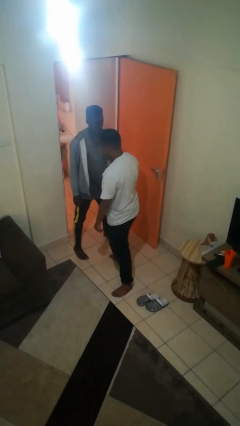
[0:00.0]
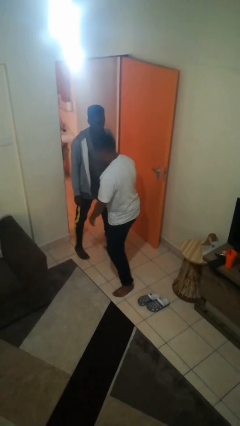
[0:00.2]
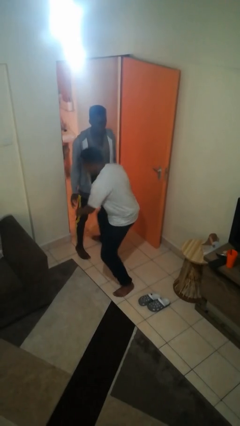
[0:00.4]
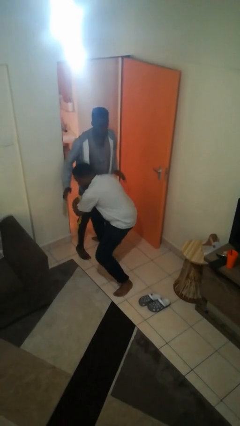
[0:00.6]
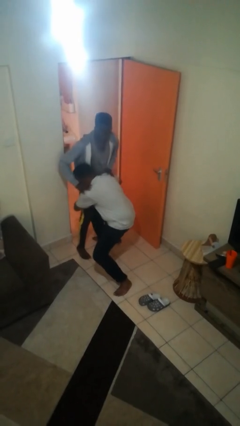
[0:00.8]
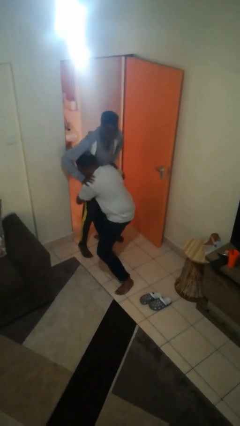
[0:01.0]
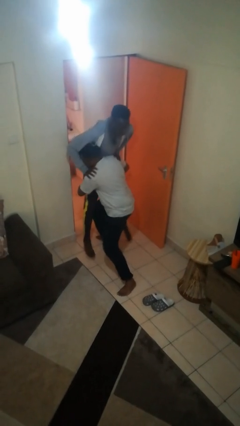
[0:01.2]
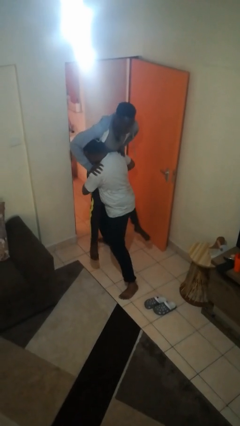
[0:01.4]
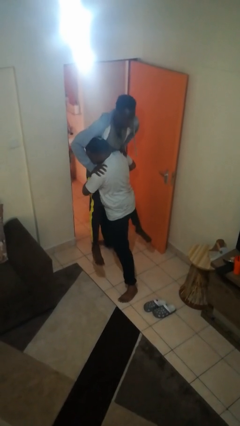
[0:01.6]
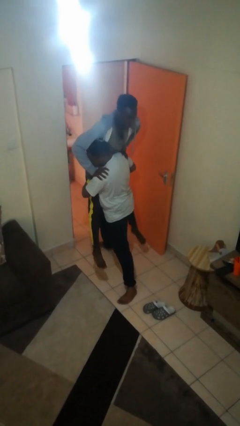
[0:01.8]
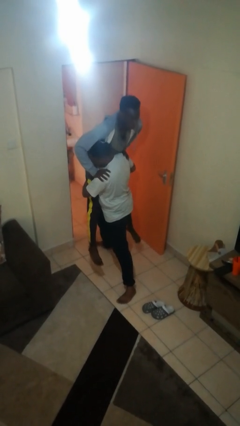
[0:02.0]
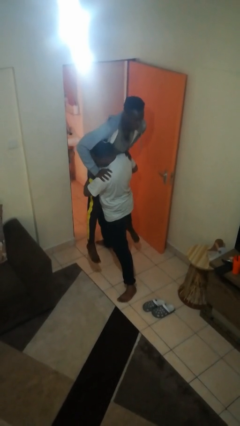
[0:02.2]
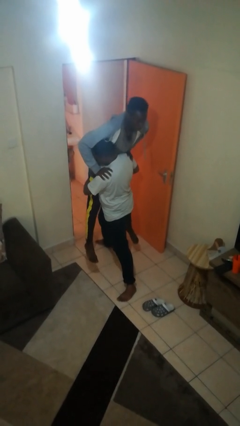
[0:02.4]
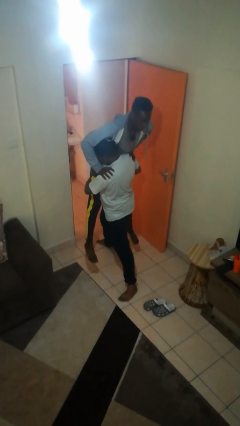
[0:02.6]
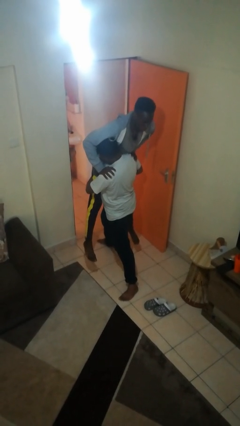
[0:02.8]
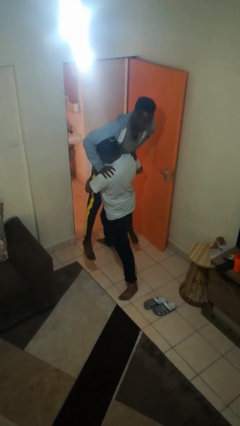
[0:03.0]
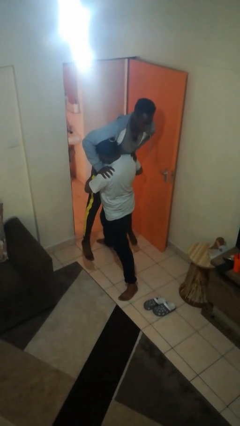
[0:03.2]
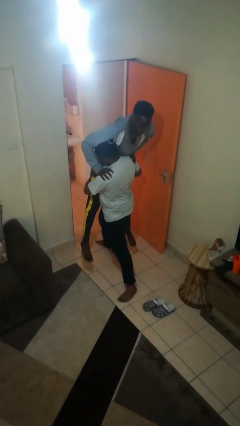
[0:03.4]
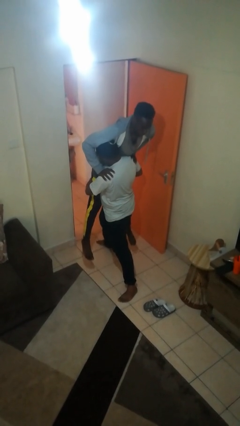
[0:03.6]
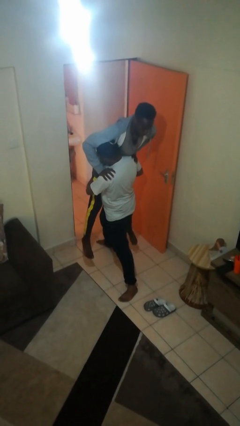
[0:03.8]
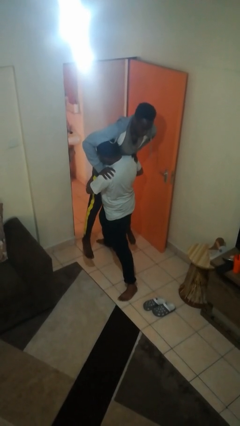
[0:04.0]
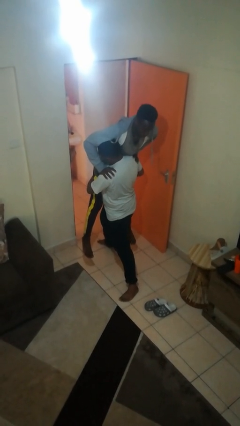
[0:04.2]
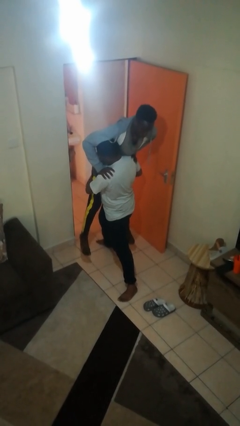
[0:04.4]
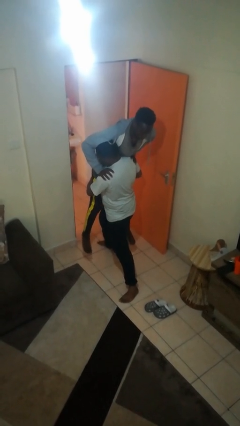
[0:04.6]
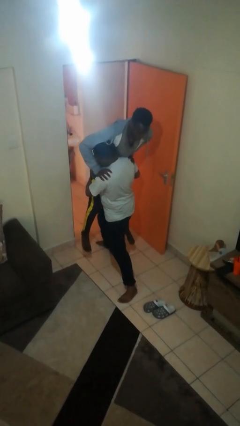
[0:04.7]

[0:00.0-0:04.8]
person picks up person

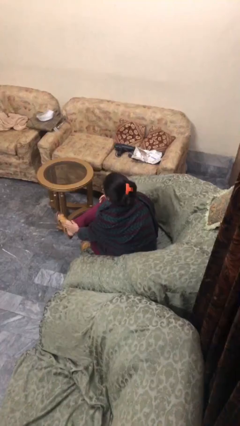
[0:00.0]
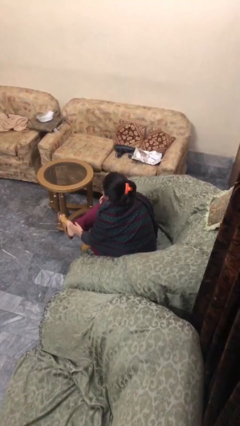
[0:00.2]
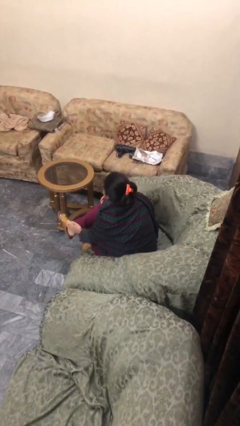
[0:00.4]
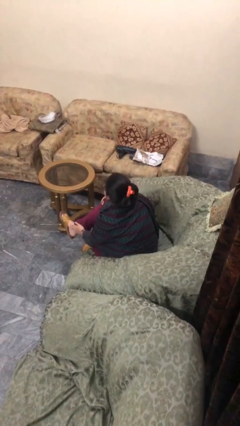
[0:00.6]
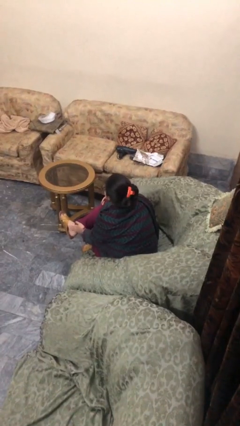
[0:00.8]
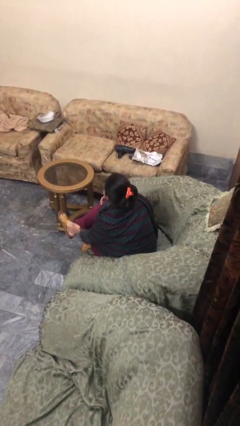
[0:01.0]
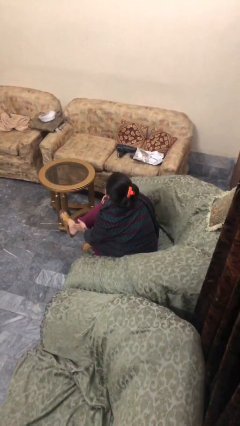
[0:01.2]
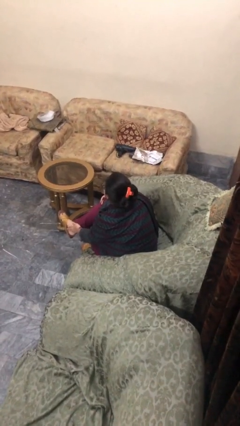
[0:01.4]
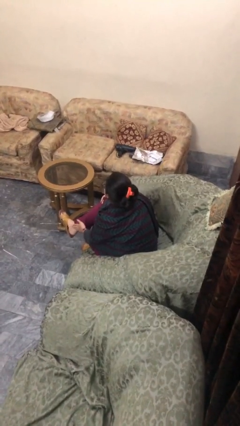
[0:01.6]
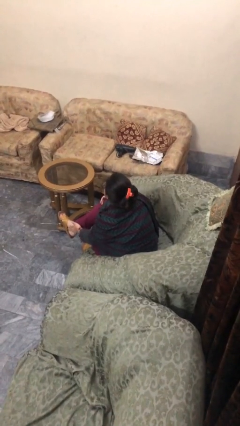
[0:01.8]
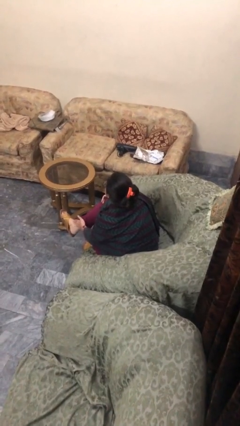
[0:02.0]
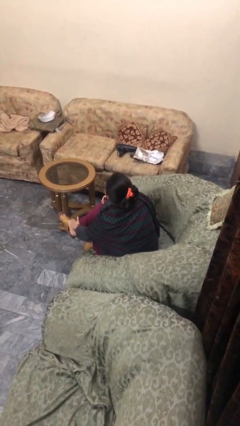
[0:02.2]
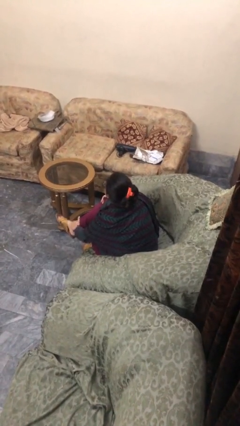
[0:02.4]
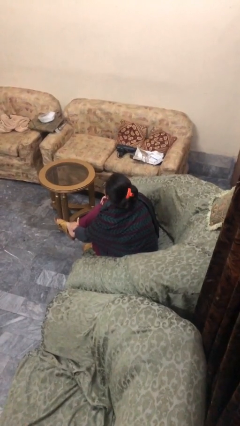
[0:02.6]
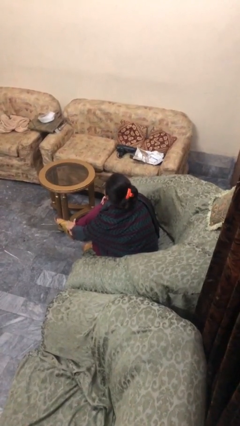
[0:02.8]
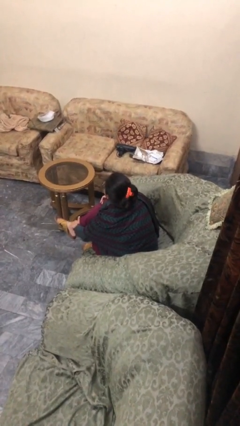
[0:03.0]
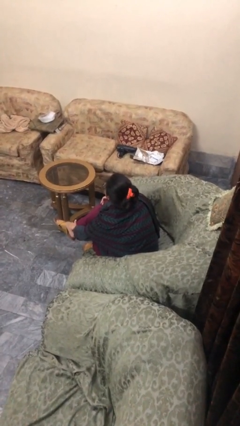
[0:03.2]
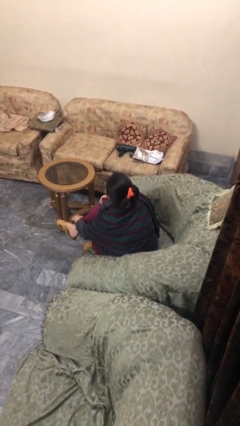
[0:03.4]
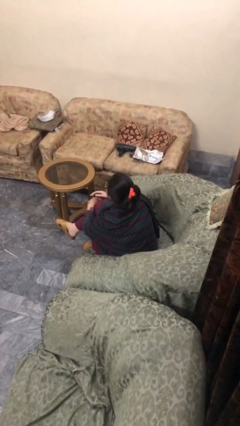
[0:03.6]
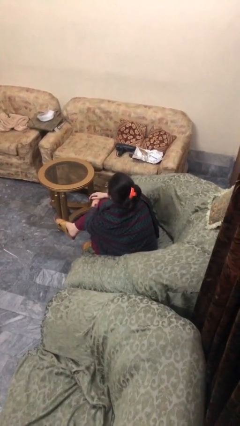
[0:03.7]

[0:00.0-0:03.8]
person rubs foot

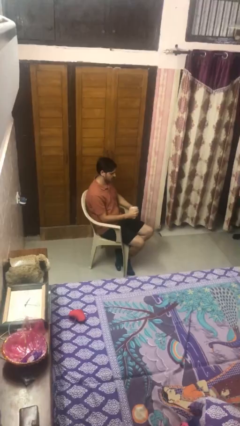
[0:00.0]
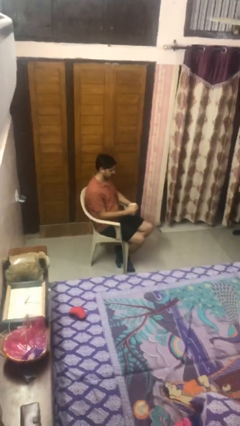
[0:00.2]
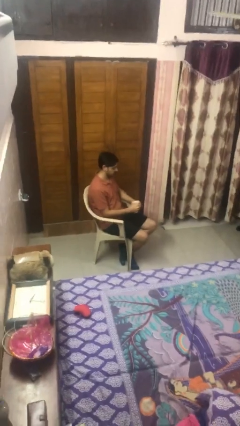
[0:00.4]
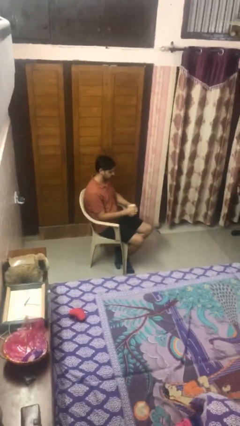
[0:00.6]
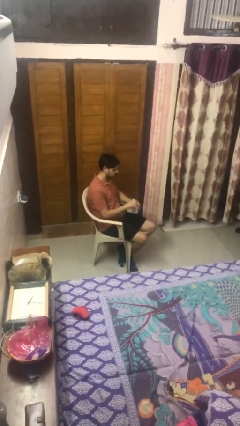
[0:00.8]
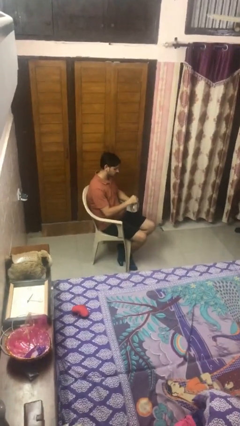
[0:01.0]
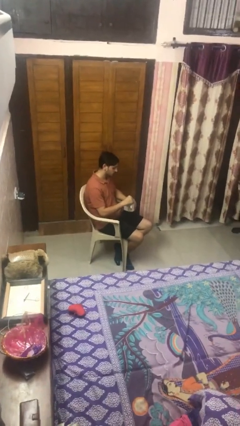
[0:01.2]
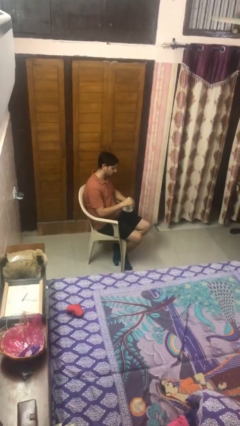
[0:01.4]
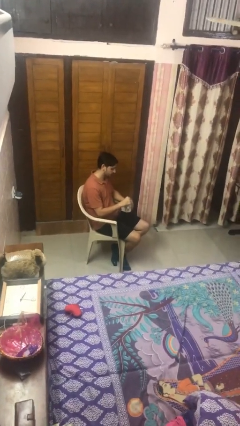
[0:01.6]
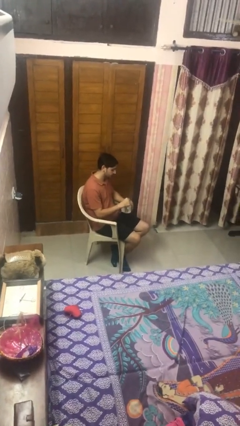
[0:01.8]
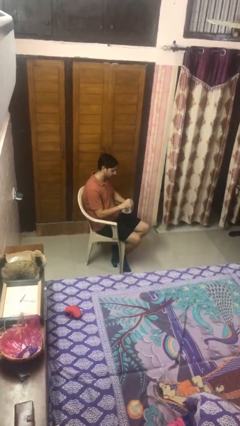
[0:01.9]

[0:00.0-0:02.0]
person stirs mug

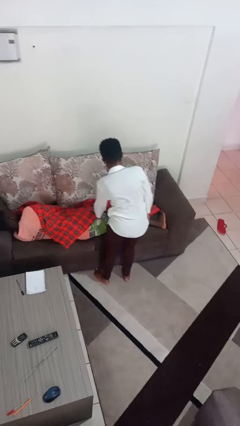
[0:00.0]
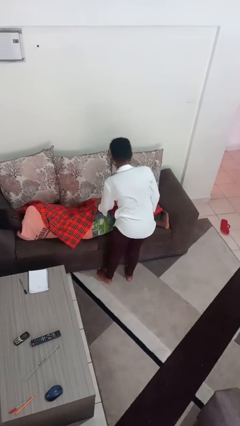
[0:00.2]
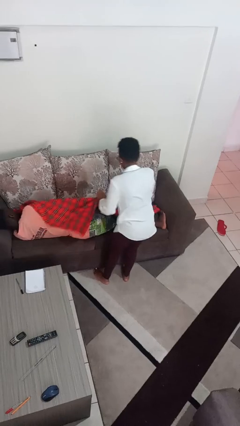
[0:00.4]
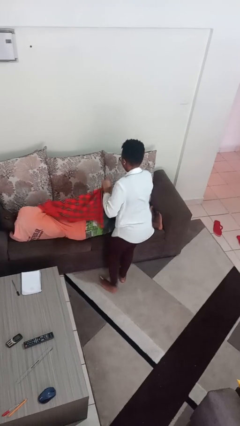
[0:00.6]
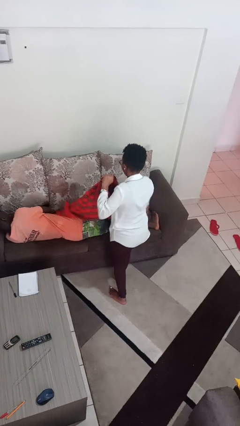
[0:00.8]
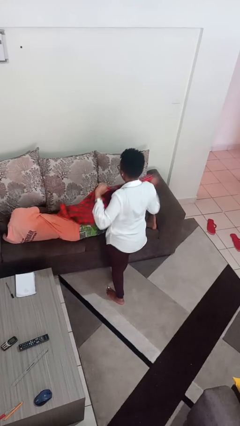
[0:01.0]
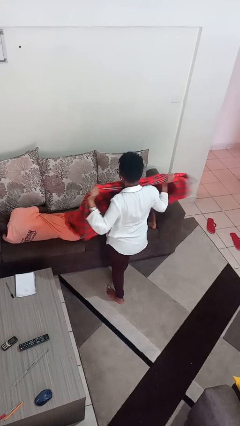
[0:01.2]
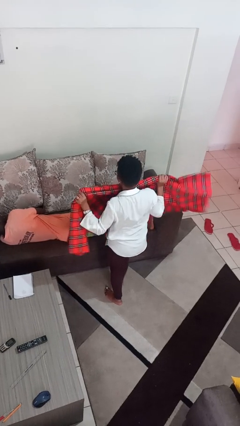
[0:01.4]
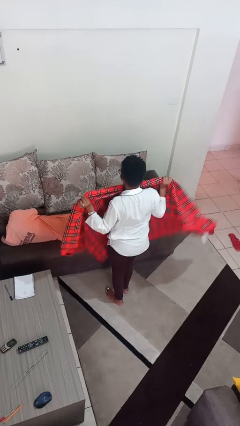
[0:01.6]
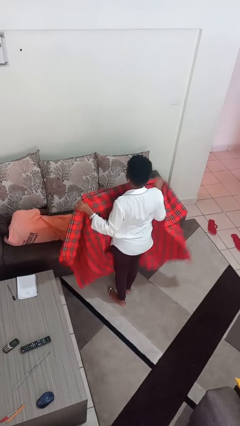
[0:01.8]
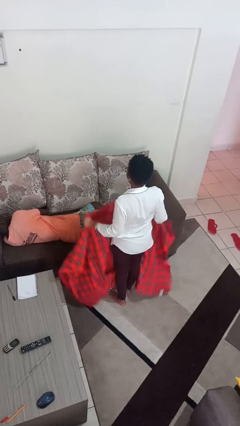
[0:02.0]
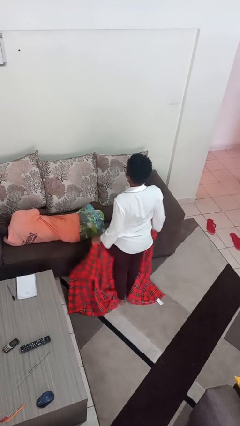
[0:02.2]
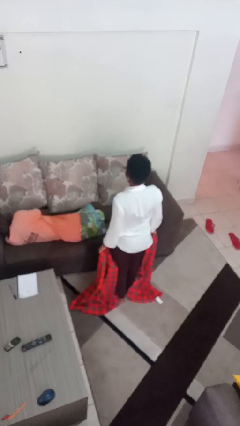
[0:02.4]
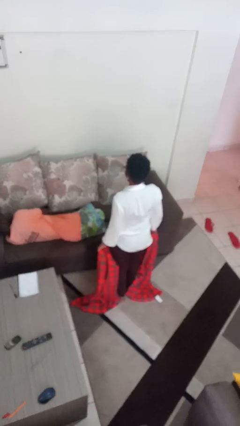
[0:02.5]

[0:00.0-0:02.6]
person uncovers friend with blanket

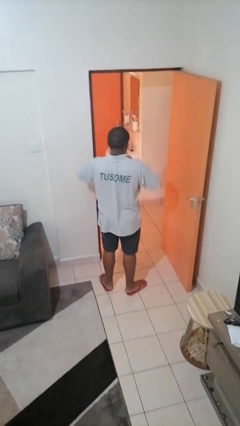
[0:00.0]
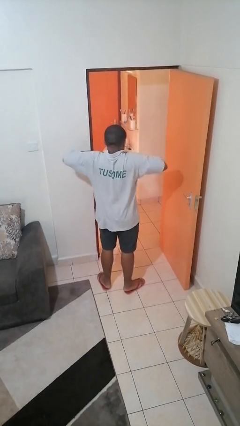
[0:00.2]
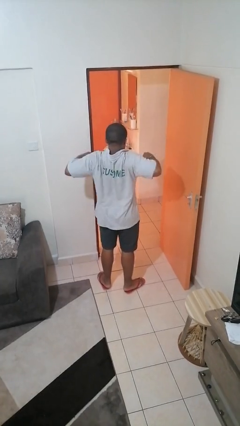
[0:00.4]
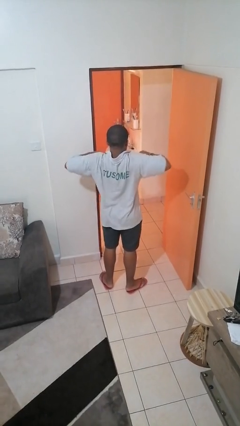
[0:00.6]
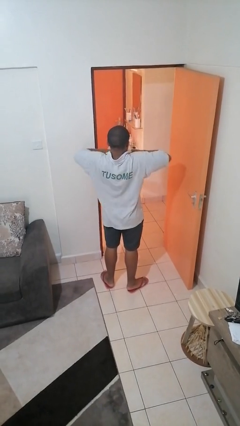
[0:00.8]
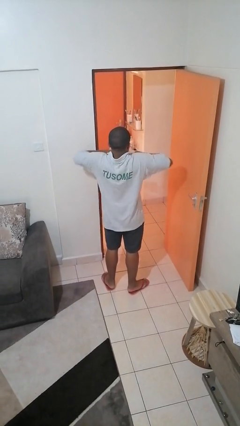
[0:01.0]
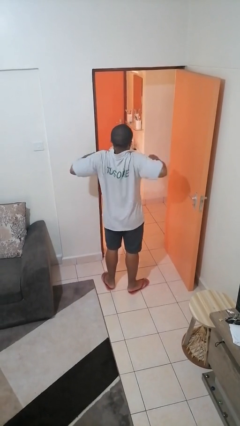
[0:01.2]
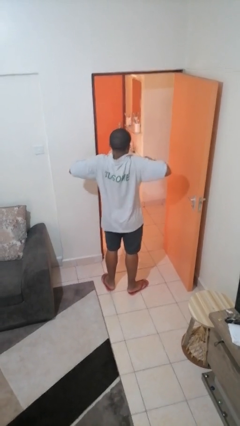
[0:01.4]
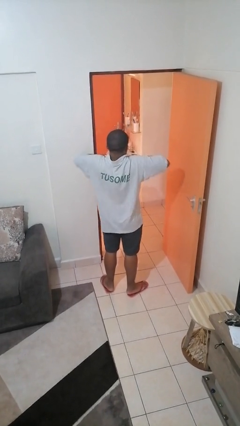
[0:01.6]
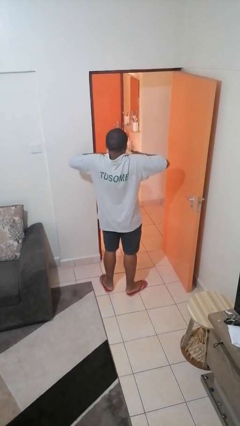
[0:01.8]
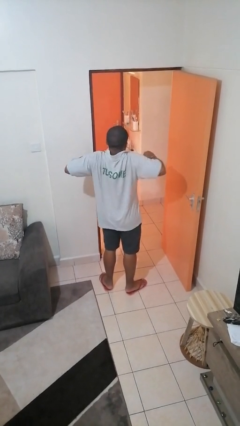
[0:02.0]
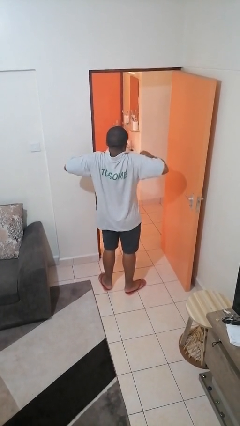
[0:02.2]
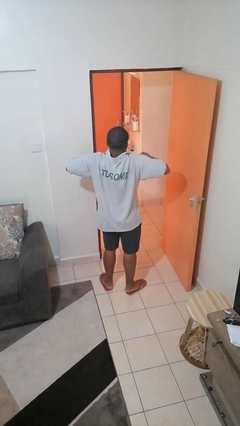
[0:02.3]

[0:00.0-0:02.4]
person stretches arms to side

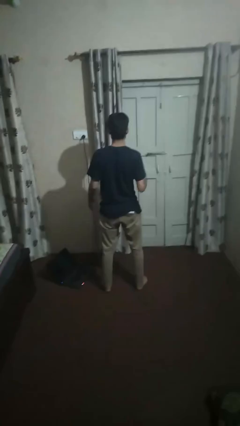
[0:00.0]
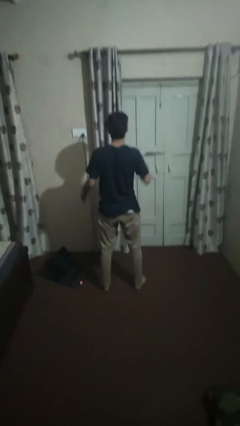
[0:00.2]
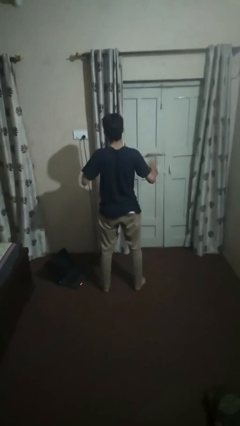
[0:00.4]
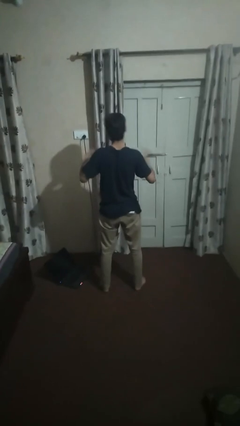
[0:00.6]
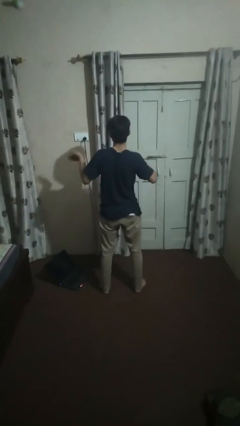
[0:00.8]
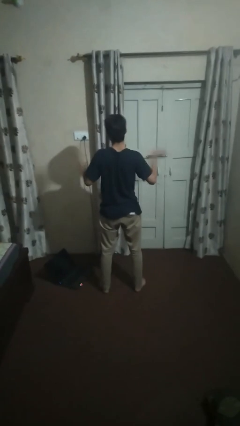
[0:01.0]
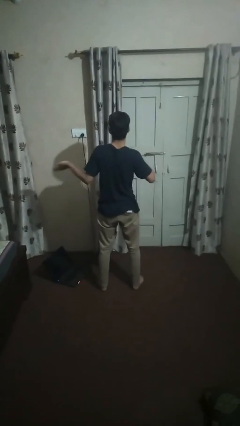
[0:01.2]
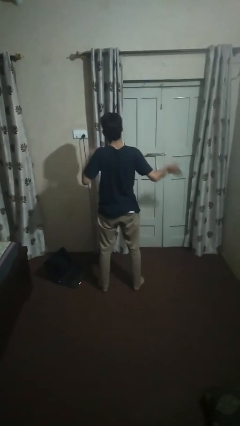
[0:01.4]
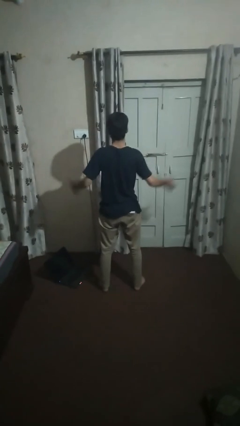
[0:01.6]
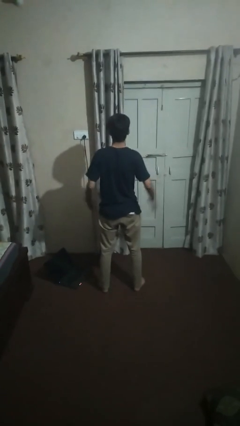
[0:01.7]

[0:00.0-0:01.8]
person drums on chest
